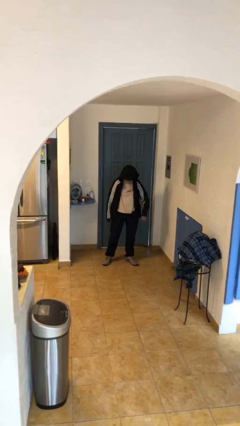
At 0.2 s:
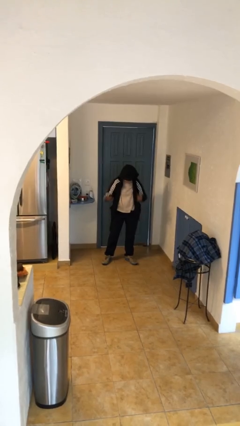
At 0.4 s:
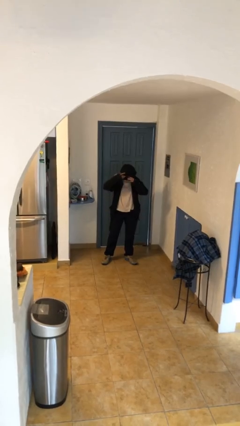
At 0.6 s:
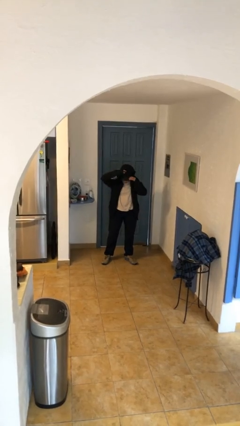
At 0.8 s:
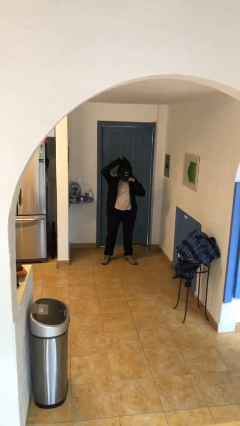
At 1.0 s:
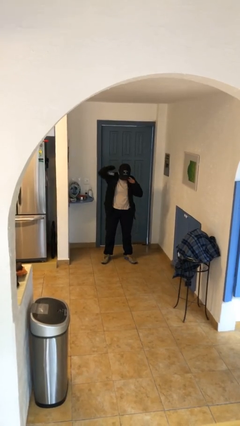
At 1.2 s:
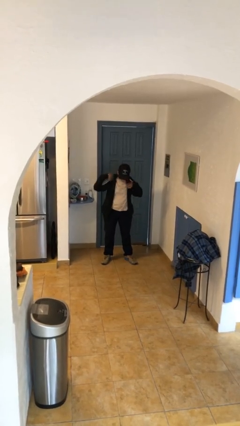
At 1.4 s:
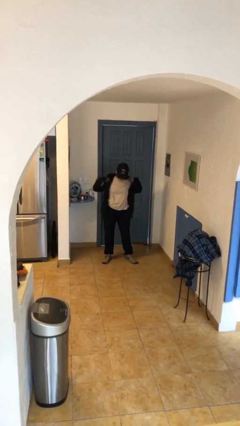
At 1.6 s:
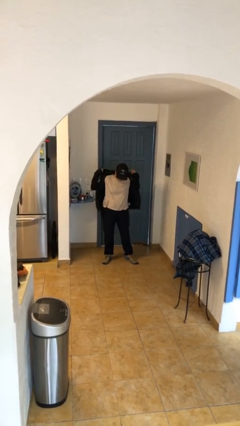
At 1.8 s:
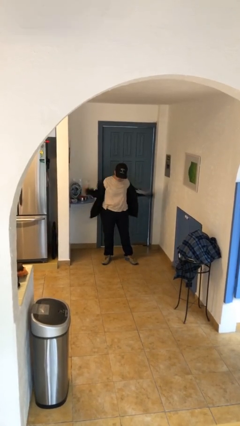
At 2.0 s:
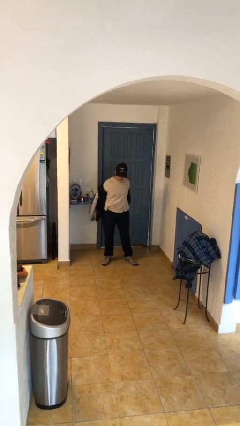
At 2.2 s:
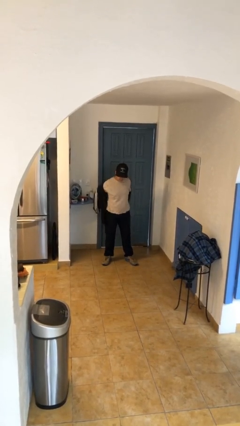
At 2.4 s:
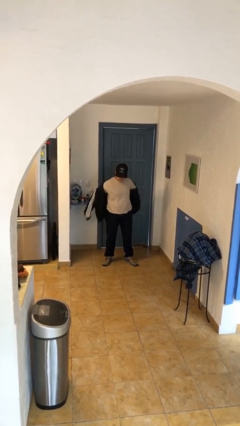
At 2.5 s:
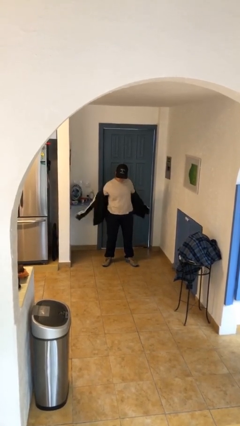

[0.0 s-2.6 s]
person takes off hoodie

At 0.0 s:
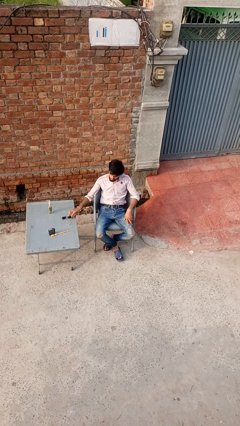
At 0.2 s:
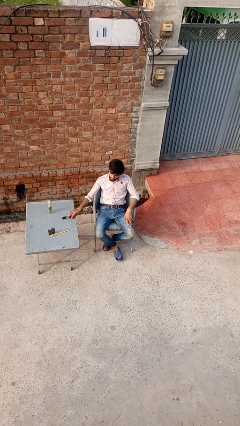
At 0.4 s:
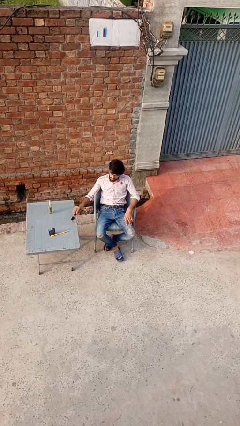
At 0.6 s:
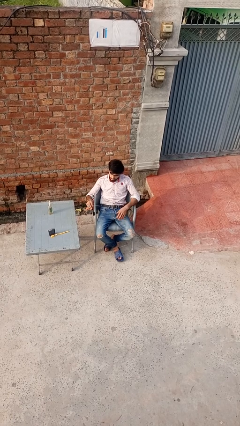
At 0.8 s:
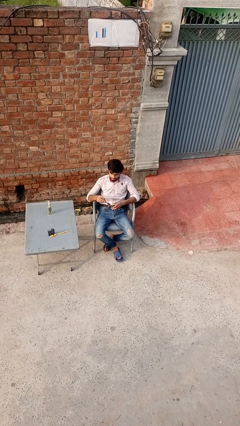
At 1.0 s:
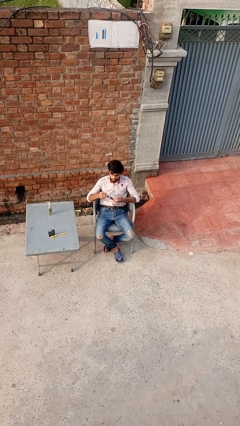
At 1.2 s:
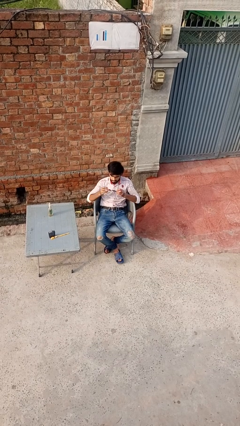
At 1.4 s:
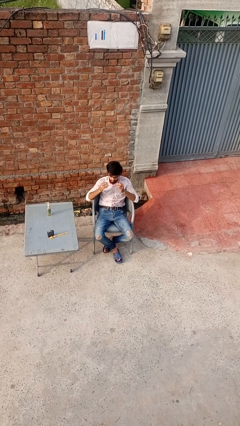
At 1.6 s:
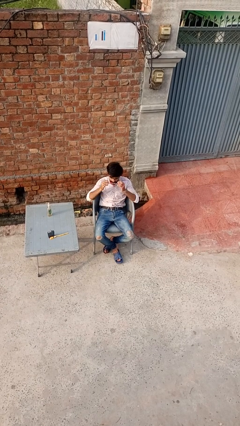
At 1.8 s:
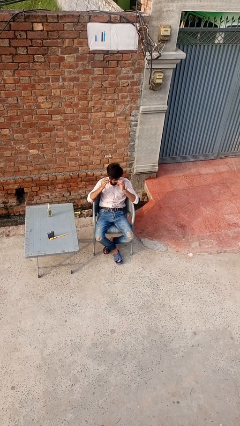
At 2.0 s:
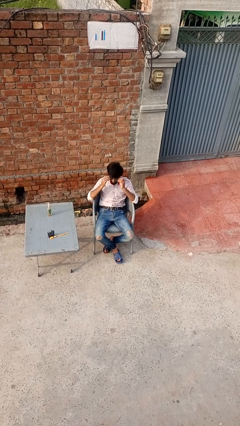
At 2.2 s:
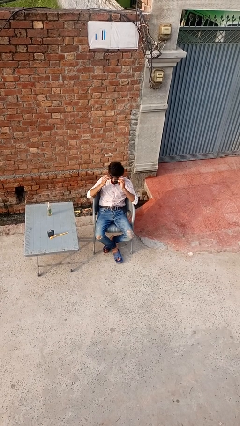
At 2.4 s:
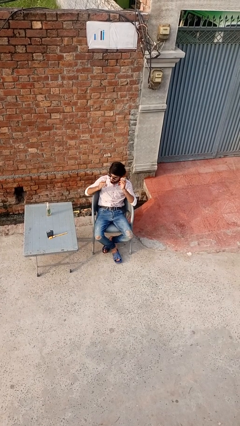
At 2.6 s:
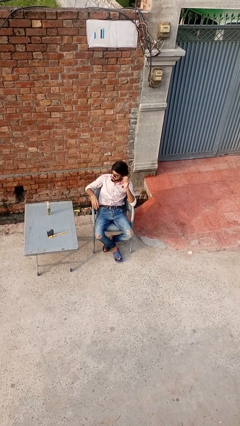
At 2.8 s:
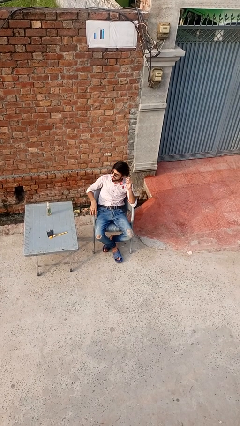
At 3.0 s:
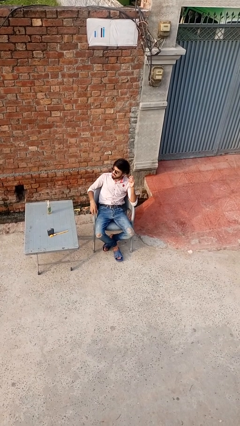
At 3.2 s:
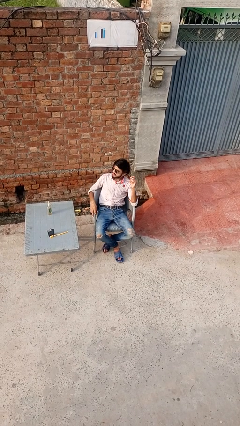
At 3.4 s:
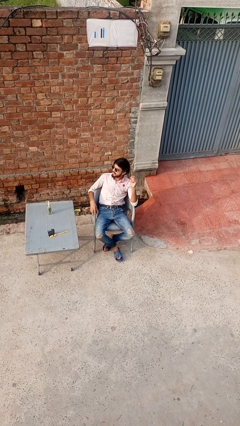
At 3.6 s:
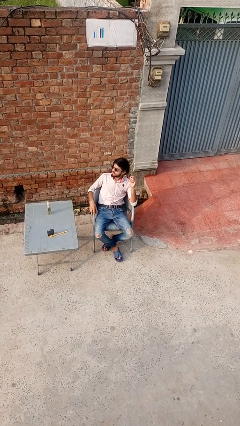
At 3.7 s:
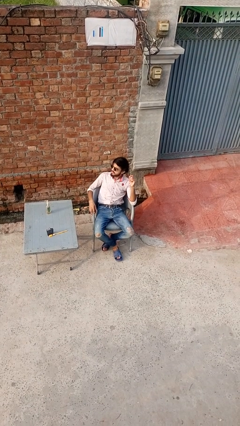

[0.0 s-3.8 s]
person puts on sunglasses

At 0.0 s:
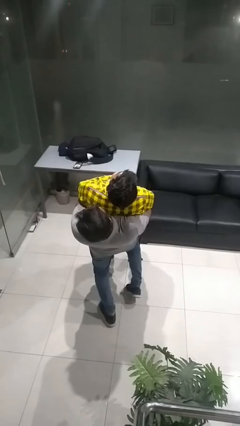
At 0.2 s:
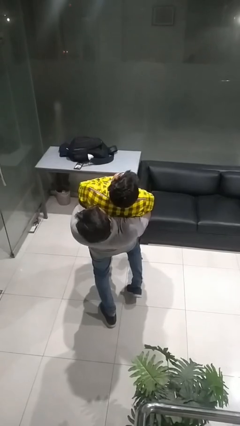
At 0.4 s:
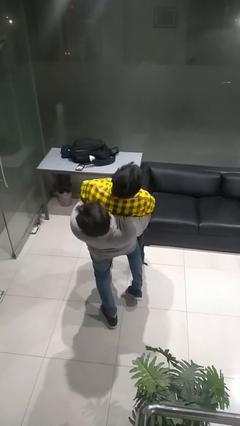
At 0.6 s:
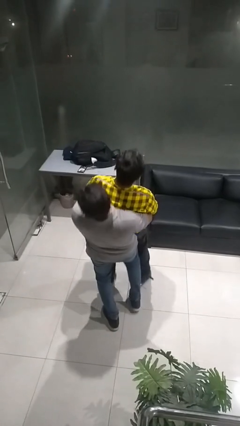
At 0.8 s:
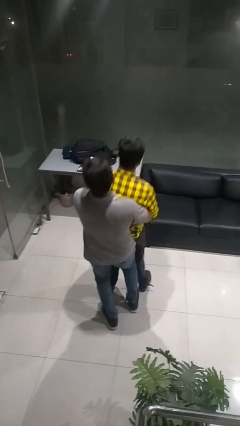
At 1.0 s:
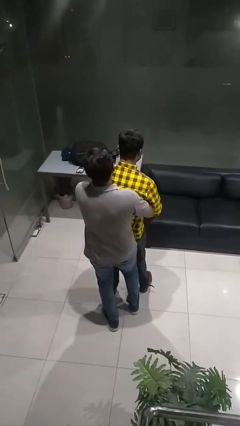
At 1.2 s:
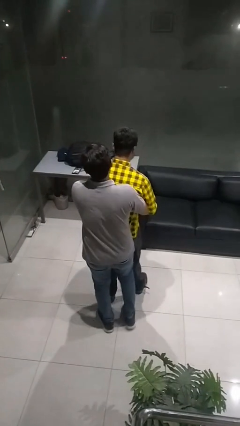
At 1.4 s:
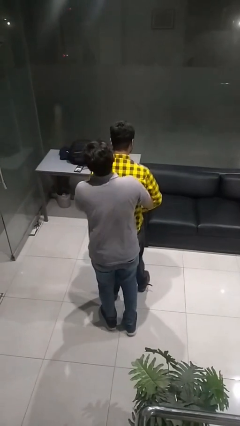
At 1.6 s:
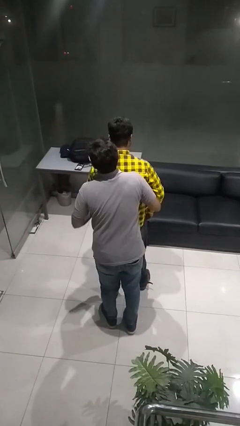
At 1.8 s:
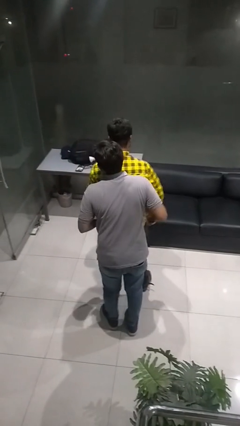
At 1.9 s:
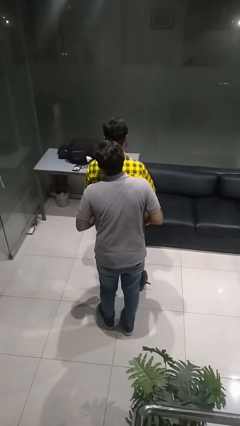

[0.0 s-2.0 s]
person puts down person

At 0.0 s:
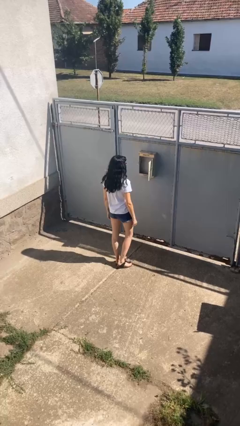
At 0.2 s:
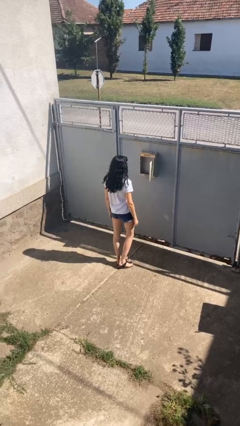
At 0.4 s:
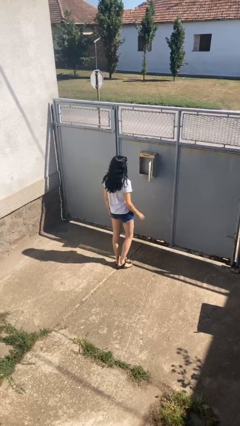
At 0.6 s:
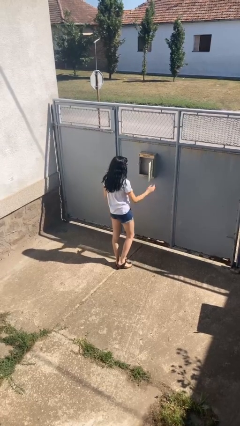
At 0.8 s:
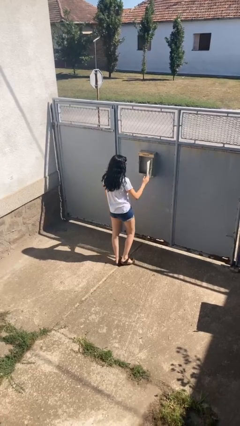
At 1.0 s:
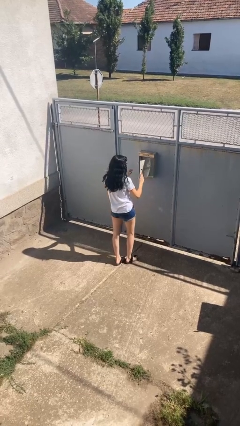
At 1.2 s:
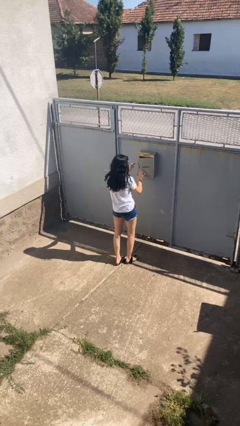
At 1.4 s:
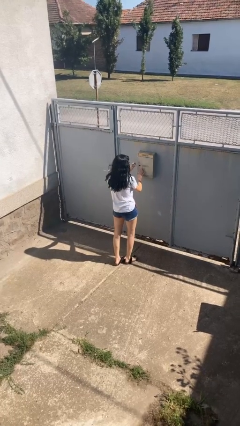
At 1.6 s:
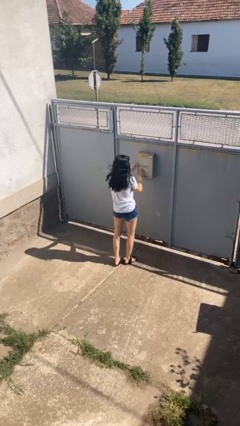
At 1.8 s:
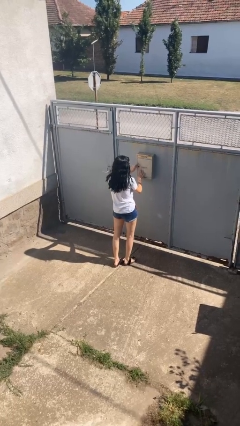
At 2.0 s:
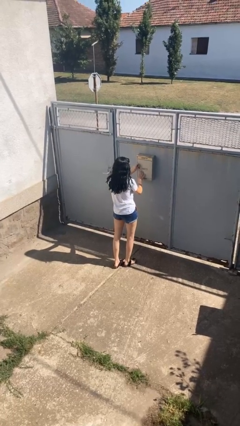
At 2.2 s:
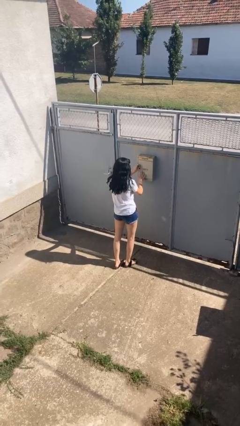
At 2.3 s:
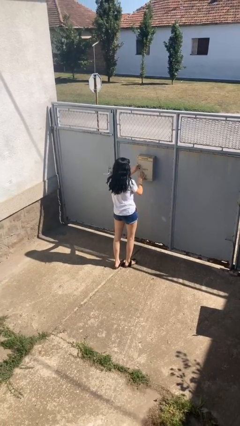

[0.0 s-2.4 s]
person closes mailbox

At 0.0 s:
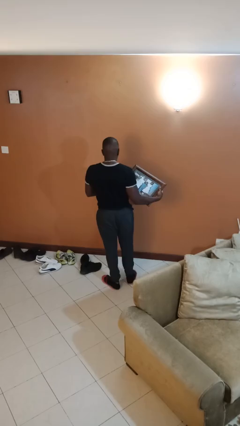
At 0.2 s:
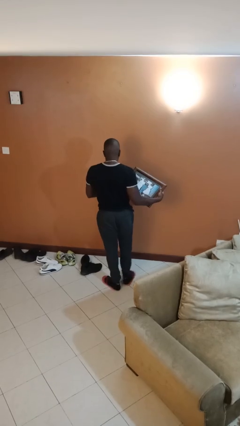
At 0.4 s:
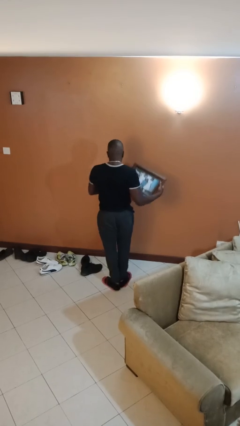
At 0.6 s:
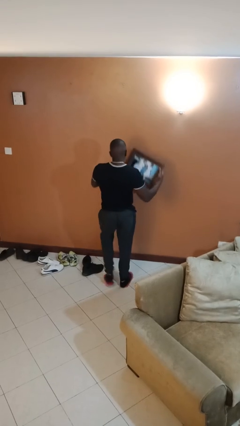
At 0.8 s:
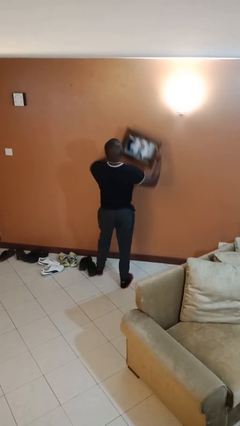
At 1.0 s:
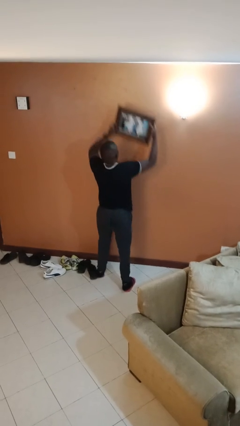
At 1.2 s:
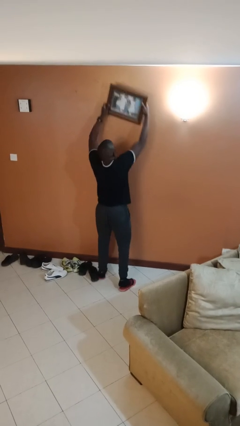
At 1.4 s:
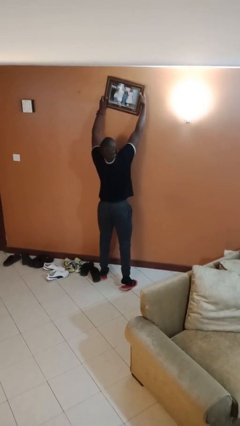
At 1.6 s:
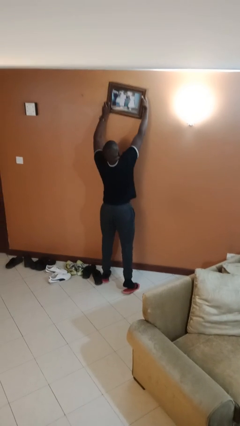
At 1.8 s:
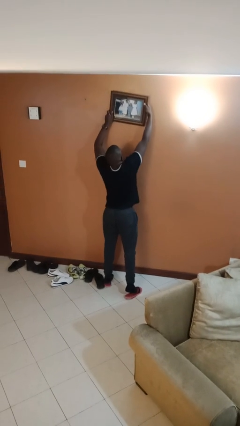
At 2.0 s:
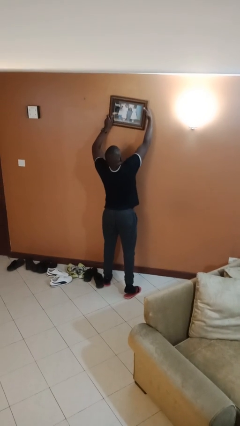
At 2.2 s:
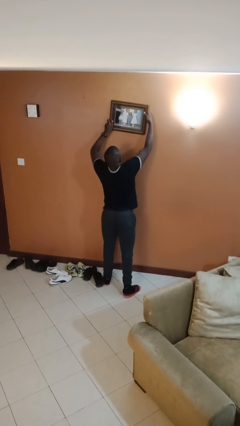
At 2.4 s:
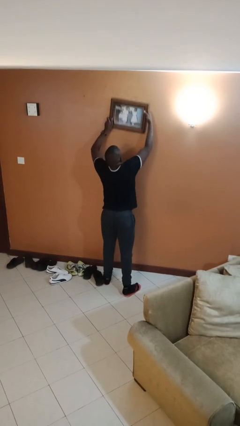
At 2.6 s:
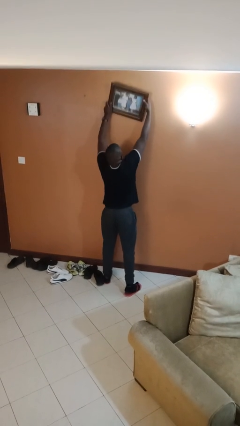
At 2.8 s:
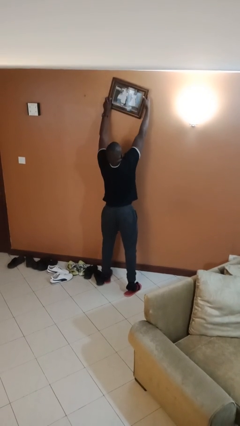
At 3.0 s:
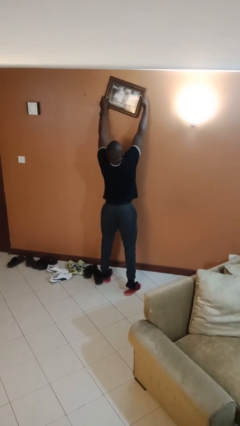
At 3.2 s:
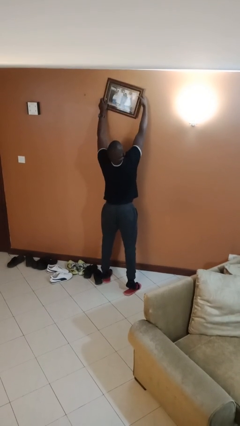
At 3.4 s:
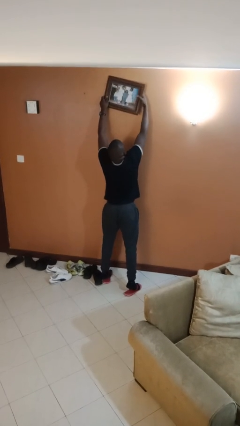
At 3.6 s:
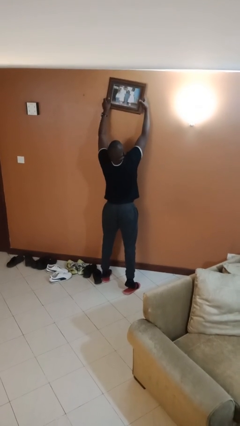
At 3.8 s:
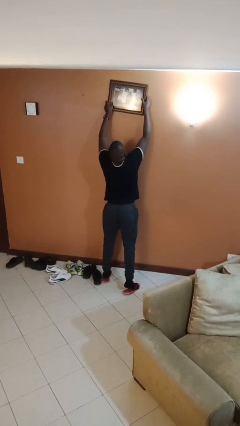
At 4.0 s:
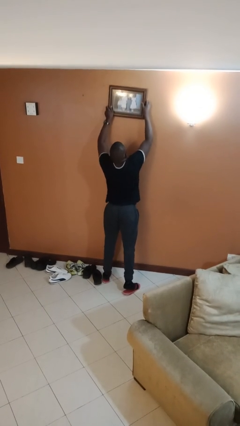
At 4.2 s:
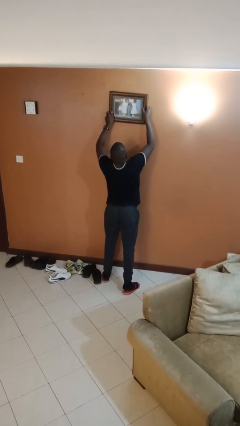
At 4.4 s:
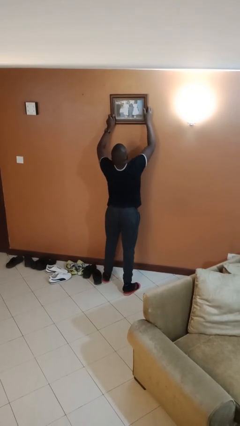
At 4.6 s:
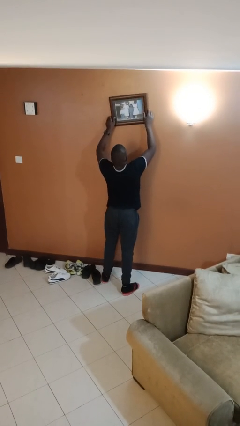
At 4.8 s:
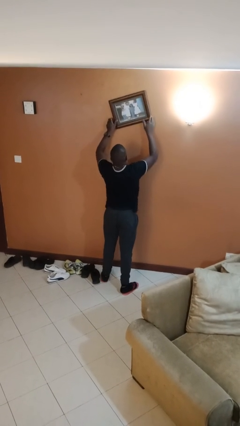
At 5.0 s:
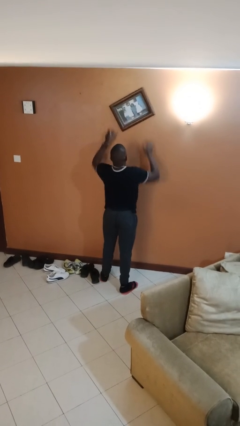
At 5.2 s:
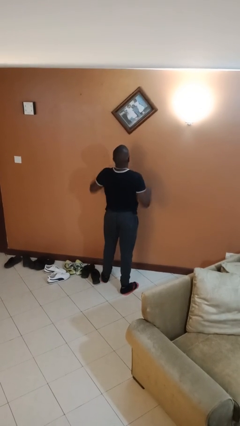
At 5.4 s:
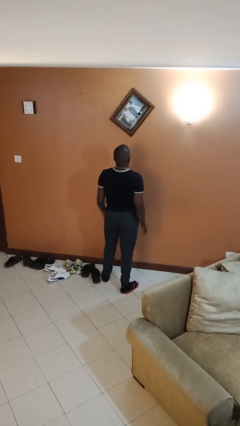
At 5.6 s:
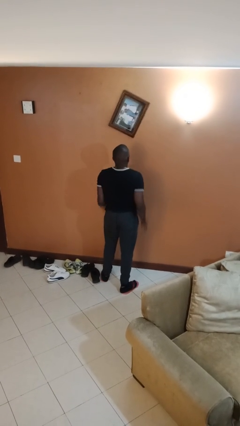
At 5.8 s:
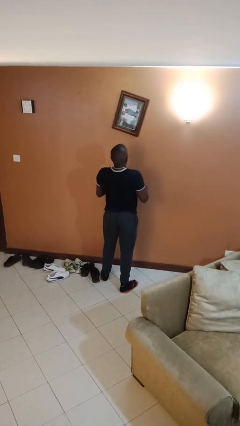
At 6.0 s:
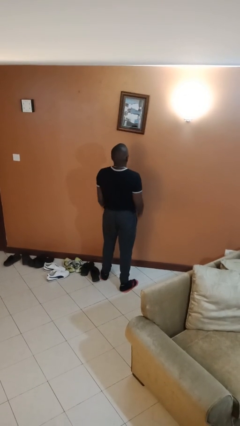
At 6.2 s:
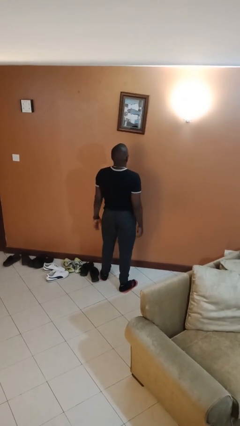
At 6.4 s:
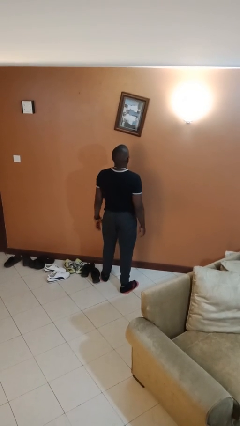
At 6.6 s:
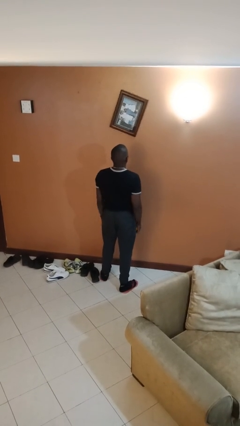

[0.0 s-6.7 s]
person puts up picture frame

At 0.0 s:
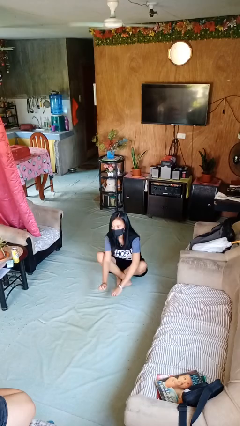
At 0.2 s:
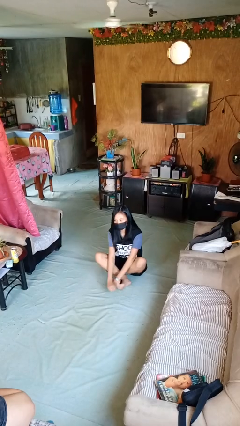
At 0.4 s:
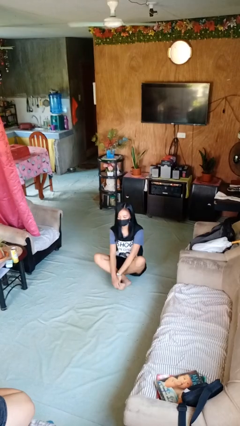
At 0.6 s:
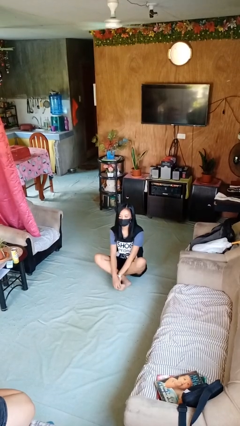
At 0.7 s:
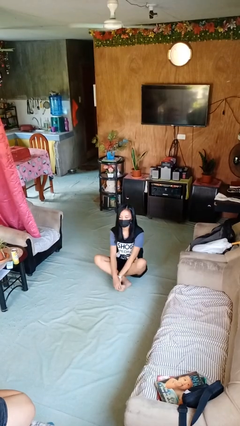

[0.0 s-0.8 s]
person sits crisscross
